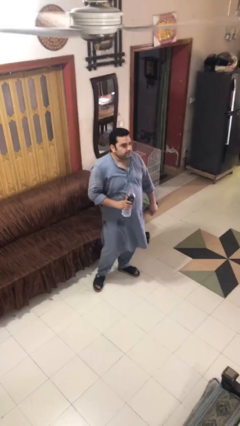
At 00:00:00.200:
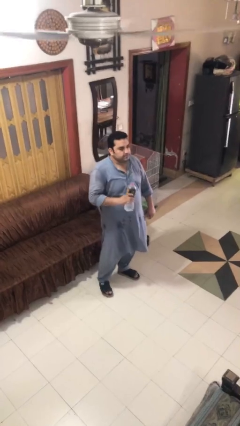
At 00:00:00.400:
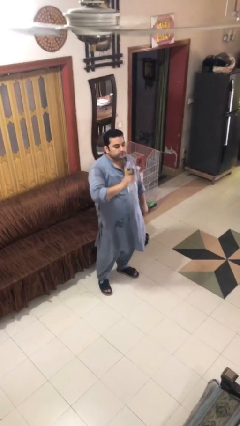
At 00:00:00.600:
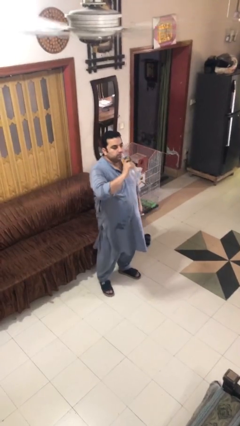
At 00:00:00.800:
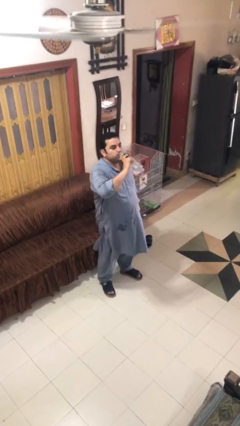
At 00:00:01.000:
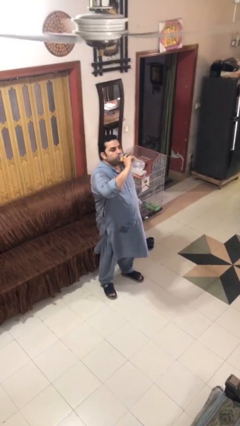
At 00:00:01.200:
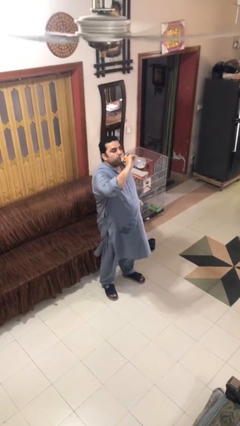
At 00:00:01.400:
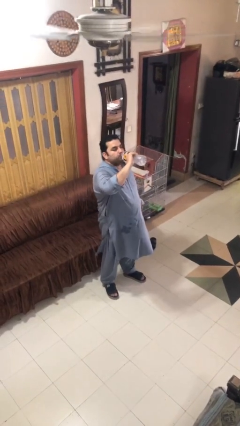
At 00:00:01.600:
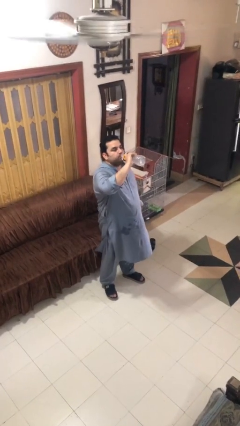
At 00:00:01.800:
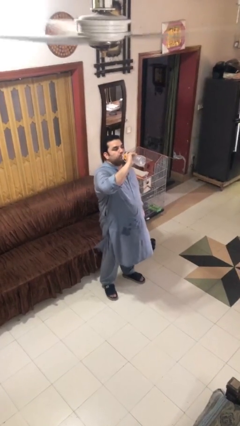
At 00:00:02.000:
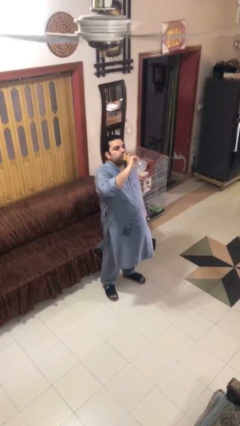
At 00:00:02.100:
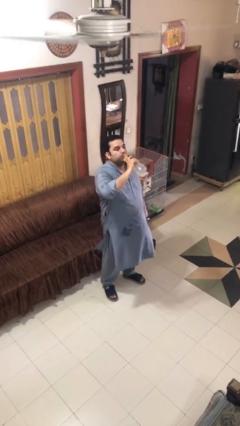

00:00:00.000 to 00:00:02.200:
person drinks from bottle

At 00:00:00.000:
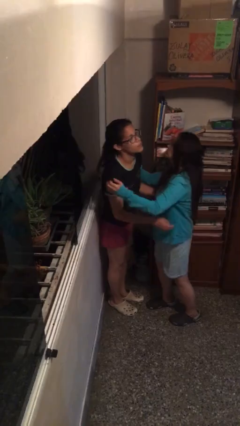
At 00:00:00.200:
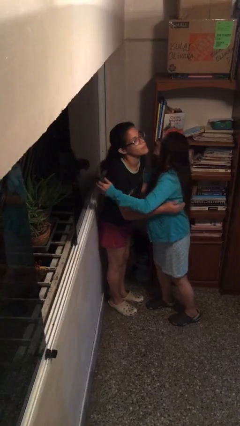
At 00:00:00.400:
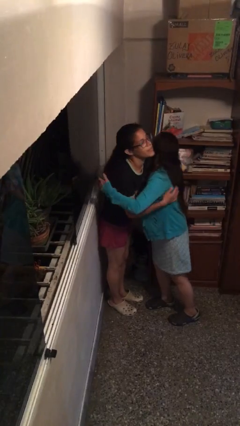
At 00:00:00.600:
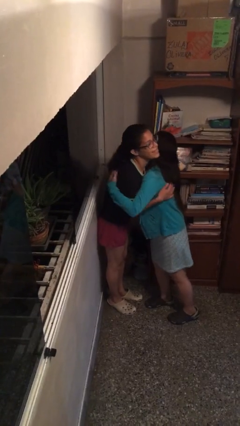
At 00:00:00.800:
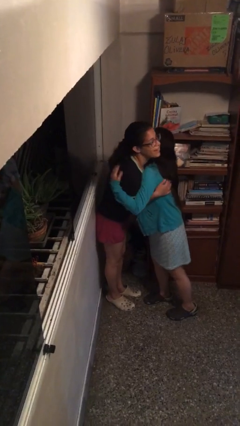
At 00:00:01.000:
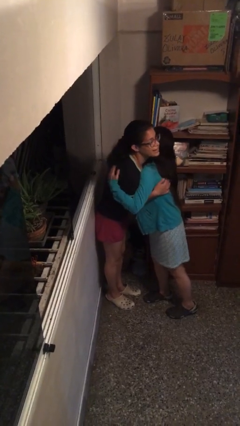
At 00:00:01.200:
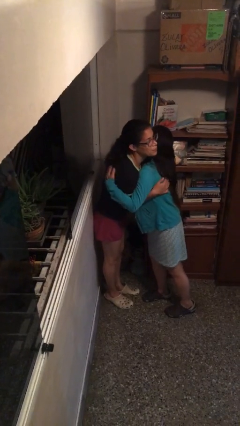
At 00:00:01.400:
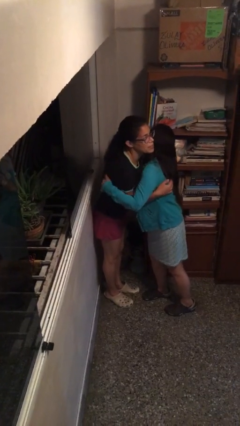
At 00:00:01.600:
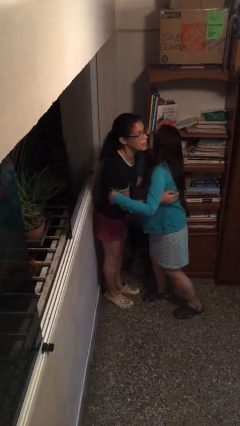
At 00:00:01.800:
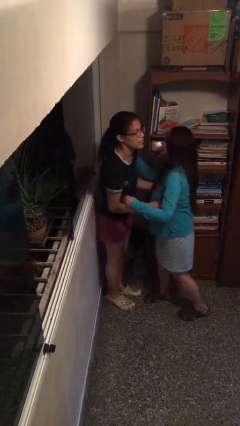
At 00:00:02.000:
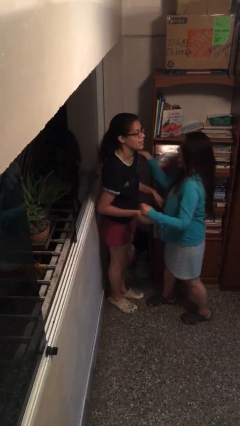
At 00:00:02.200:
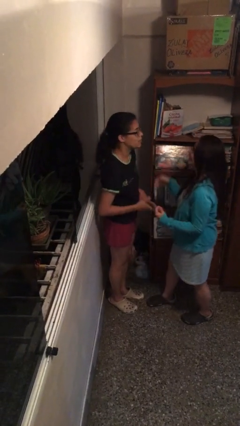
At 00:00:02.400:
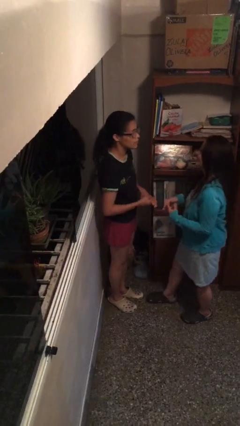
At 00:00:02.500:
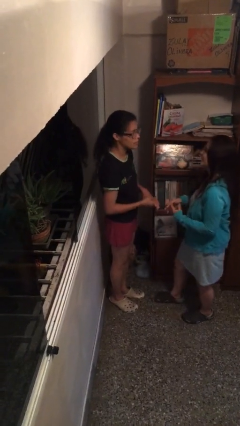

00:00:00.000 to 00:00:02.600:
person embraces person

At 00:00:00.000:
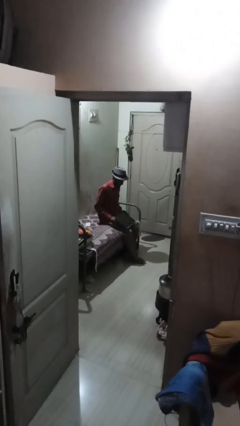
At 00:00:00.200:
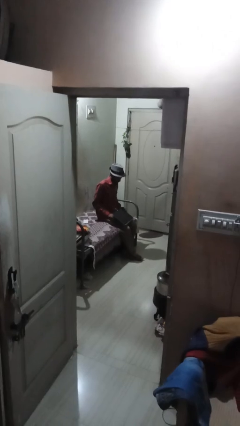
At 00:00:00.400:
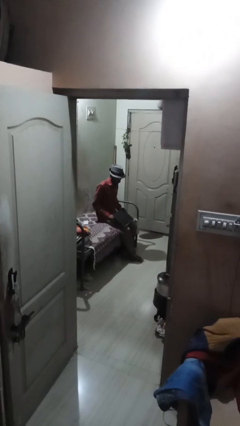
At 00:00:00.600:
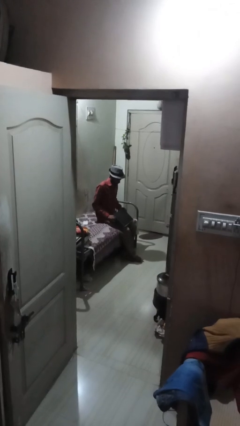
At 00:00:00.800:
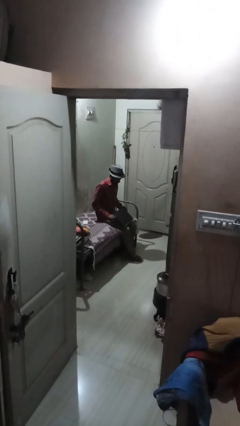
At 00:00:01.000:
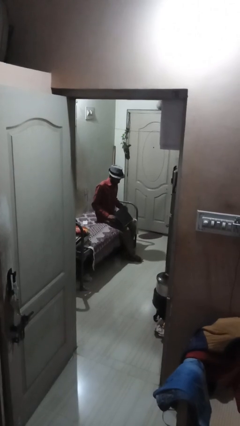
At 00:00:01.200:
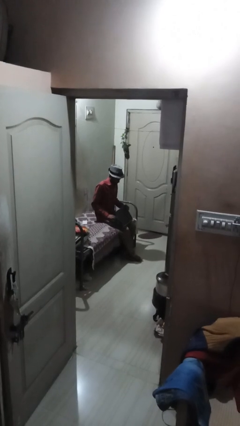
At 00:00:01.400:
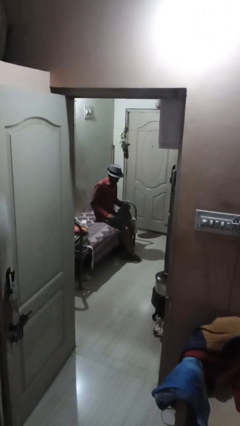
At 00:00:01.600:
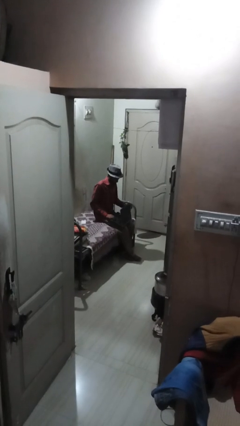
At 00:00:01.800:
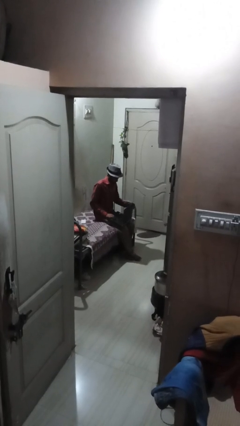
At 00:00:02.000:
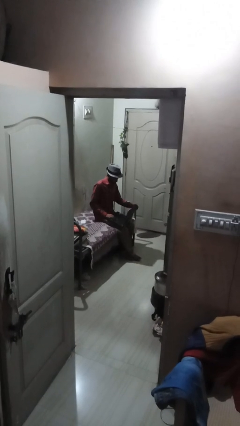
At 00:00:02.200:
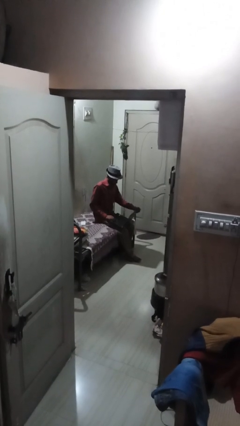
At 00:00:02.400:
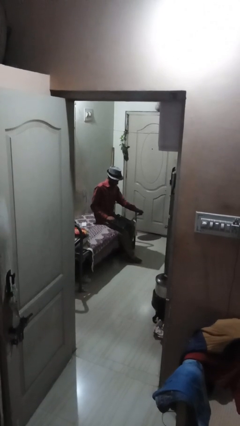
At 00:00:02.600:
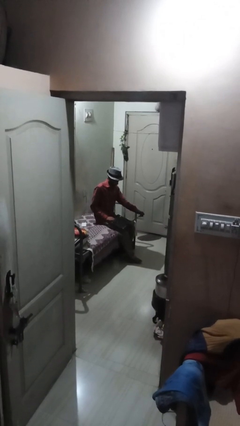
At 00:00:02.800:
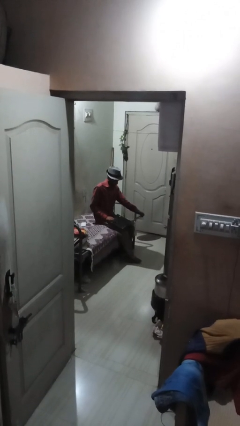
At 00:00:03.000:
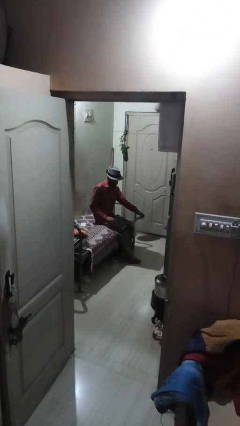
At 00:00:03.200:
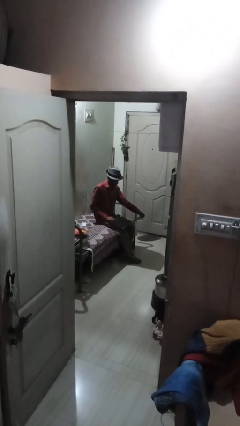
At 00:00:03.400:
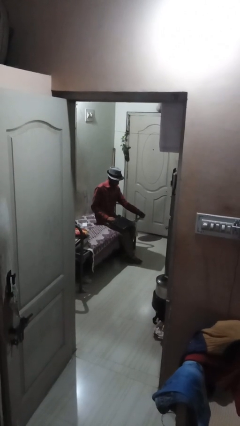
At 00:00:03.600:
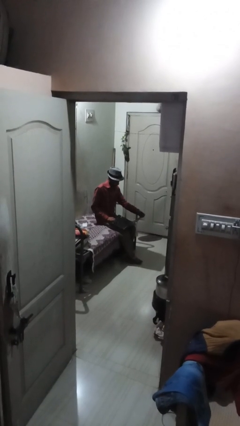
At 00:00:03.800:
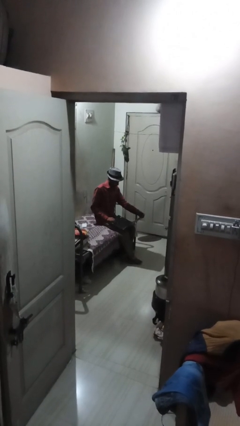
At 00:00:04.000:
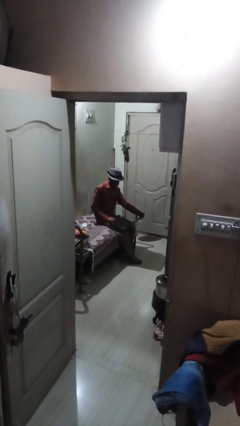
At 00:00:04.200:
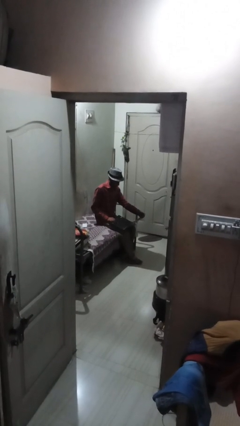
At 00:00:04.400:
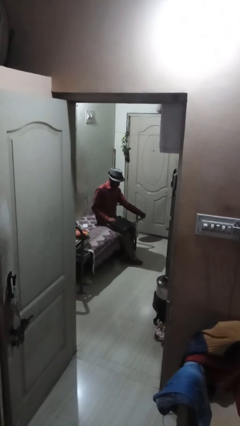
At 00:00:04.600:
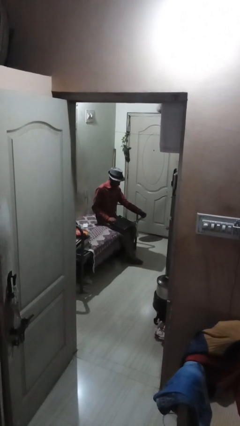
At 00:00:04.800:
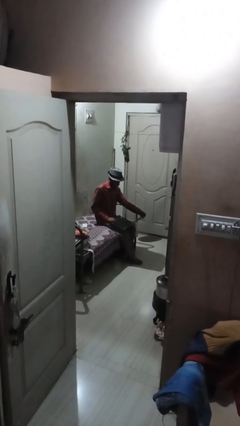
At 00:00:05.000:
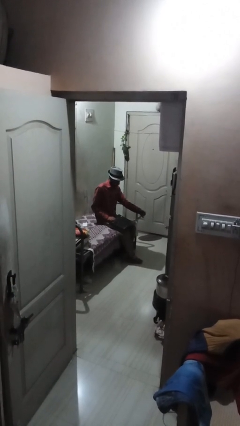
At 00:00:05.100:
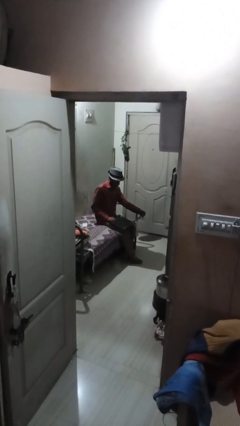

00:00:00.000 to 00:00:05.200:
person opens laptop

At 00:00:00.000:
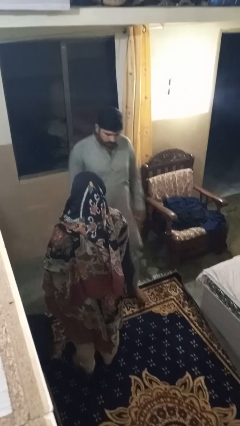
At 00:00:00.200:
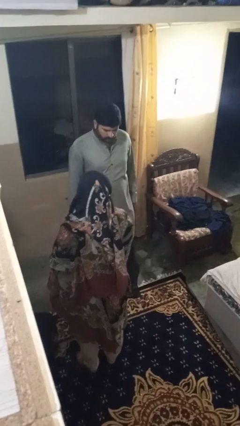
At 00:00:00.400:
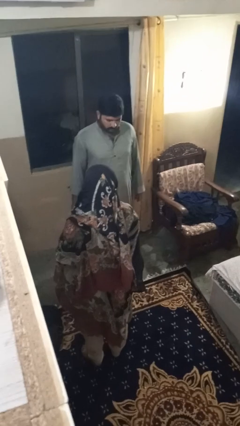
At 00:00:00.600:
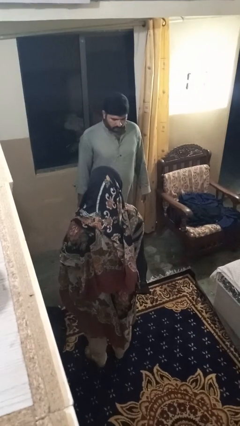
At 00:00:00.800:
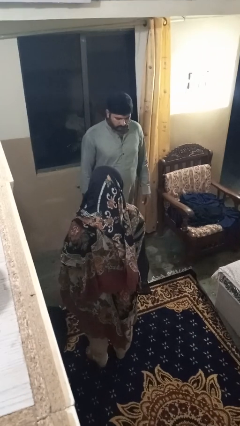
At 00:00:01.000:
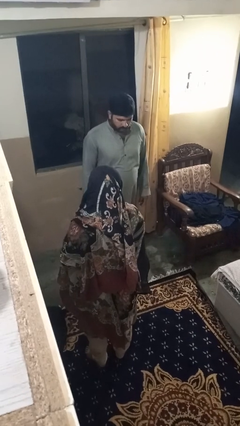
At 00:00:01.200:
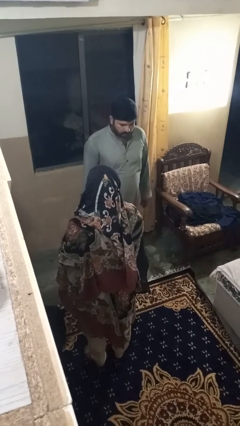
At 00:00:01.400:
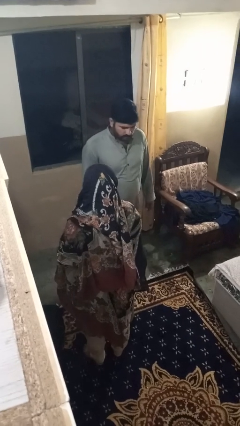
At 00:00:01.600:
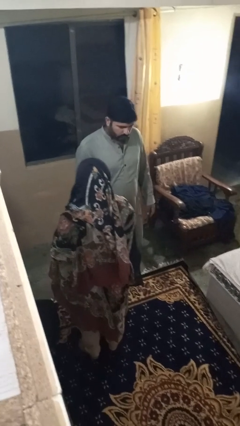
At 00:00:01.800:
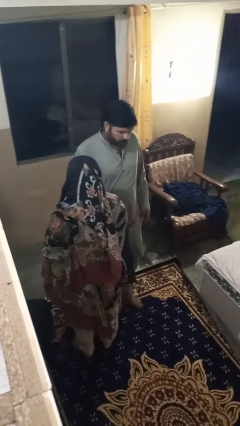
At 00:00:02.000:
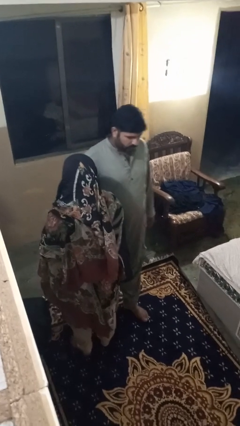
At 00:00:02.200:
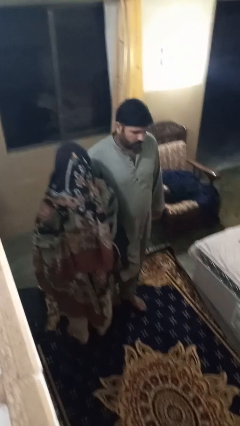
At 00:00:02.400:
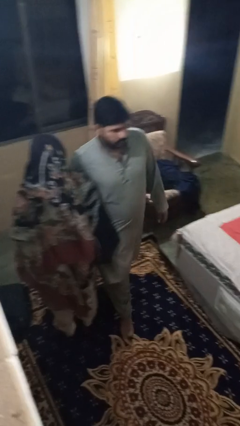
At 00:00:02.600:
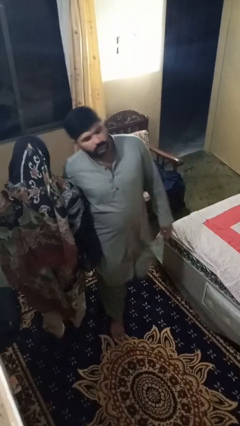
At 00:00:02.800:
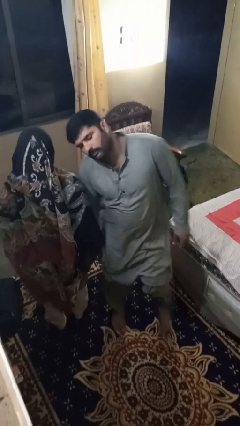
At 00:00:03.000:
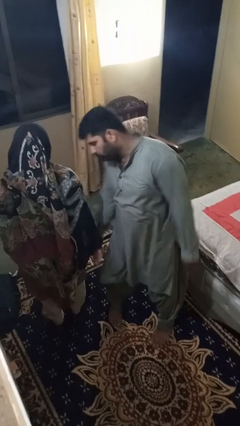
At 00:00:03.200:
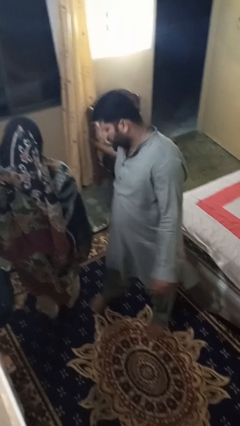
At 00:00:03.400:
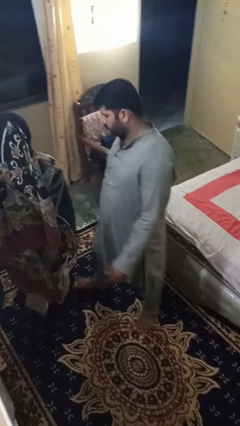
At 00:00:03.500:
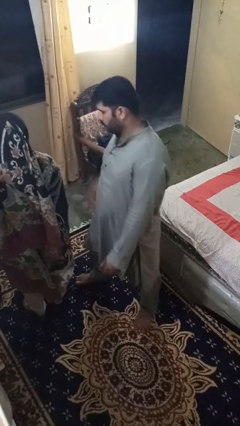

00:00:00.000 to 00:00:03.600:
person bumps into person

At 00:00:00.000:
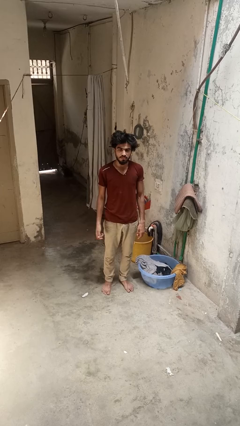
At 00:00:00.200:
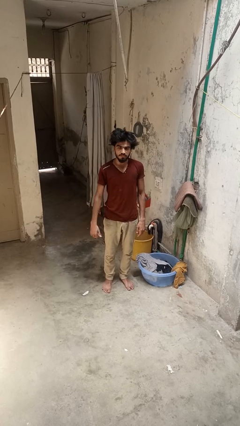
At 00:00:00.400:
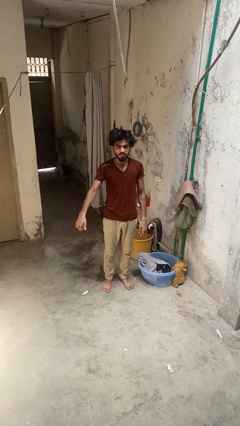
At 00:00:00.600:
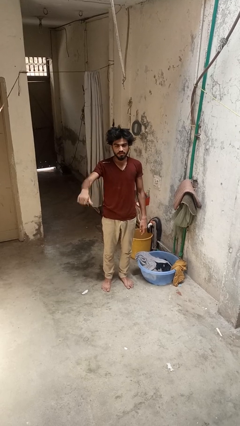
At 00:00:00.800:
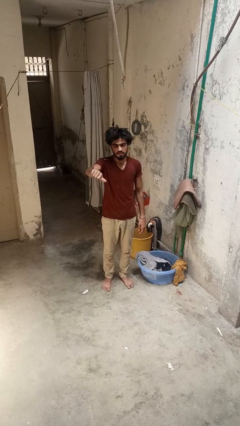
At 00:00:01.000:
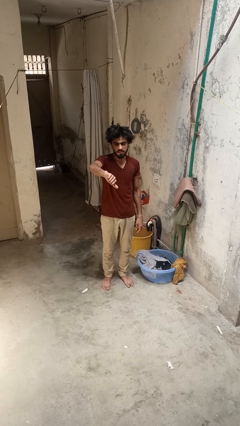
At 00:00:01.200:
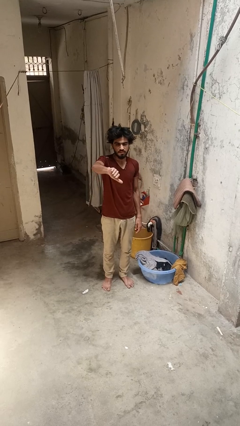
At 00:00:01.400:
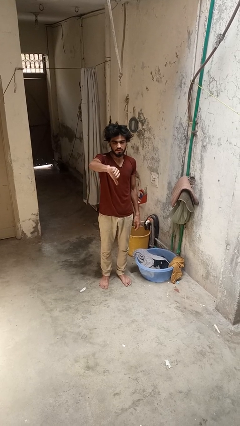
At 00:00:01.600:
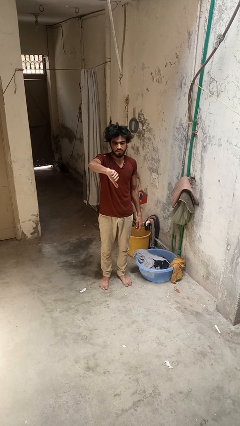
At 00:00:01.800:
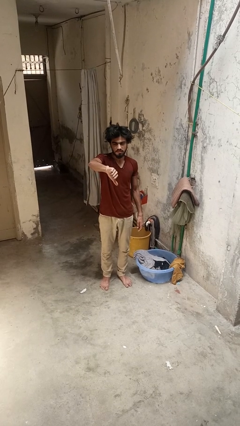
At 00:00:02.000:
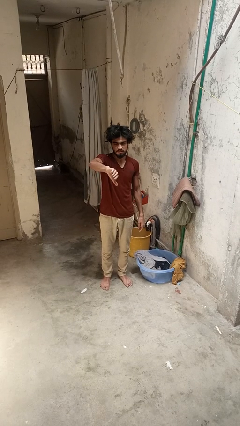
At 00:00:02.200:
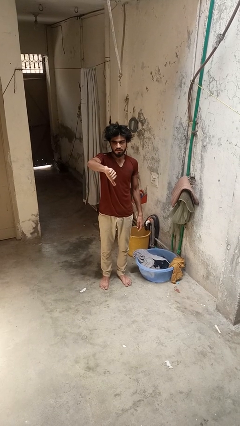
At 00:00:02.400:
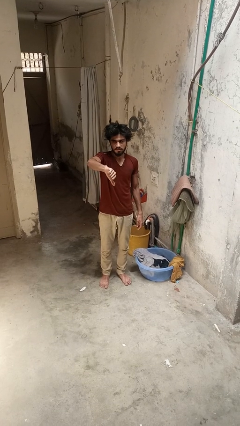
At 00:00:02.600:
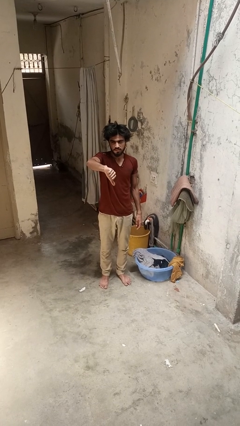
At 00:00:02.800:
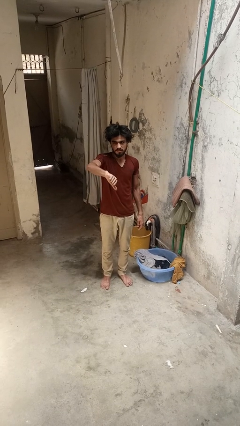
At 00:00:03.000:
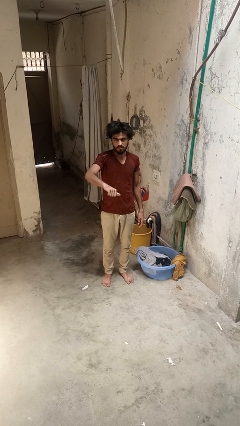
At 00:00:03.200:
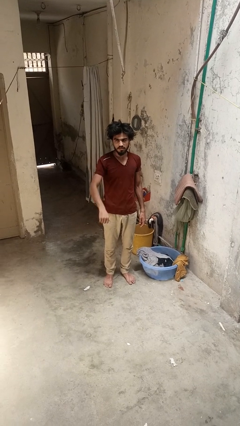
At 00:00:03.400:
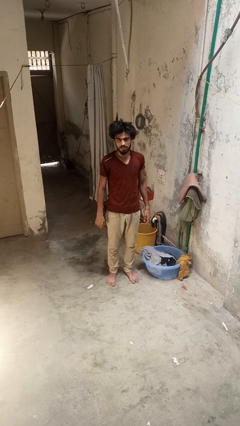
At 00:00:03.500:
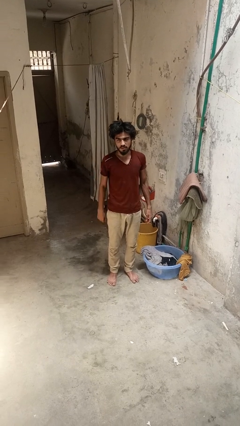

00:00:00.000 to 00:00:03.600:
person gestures thumbs down
